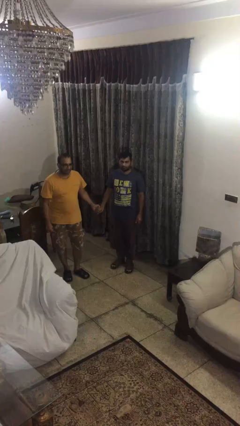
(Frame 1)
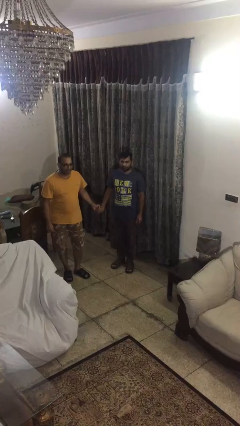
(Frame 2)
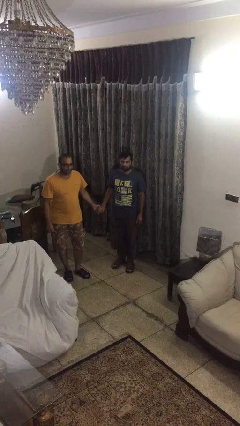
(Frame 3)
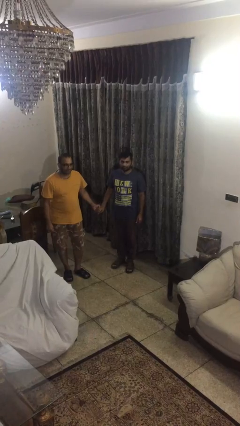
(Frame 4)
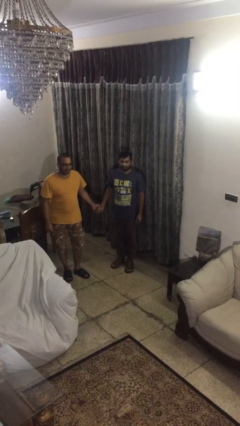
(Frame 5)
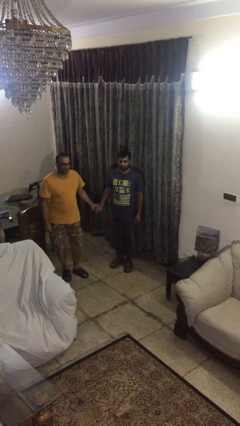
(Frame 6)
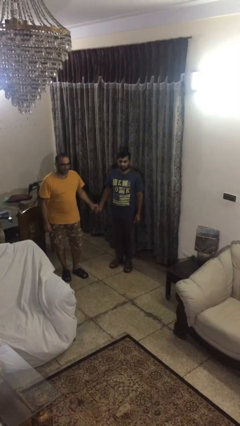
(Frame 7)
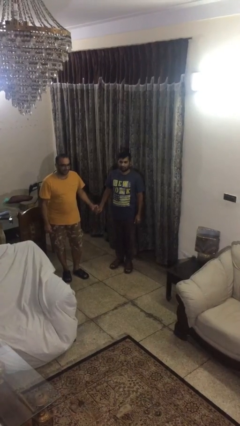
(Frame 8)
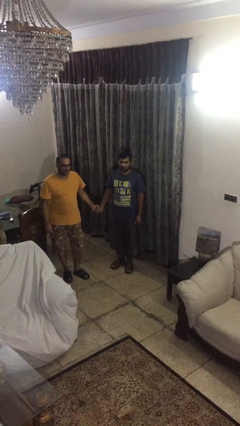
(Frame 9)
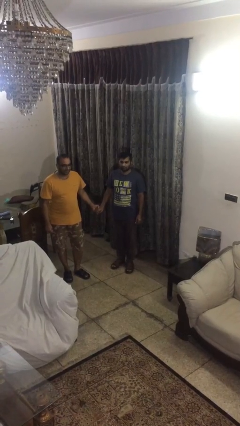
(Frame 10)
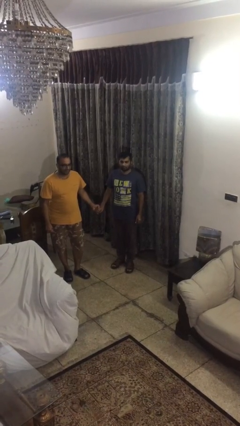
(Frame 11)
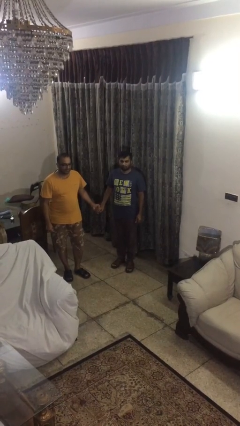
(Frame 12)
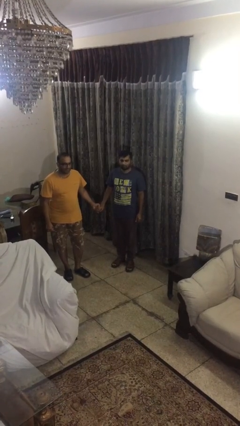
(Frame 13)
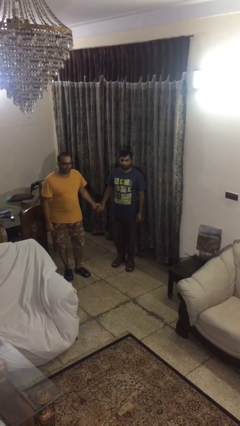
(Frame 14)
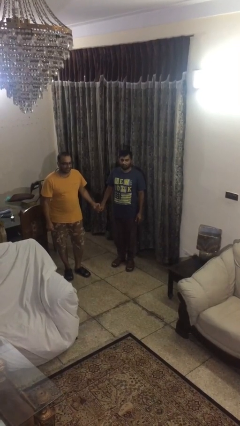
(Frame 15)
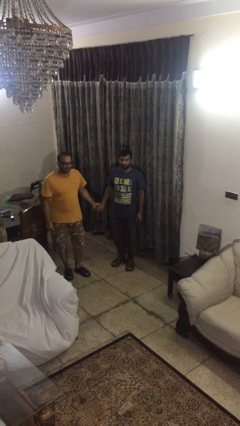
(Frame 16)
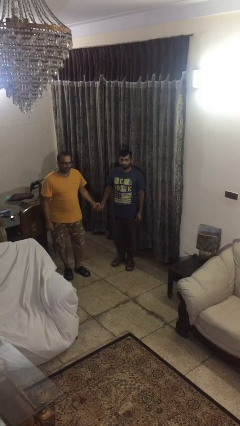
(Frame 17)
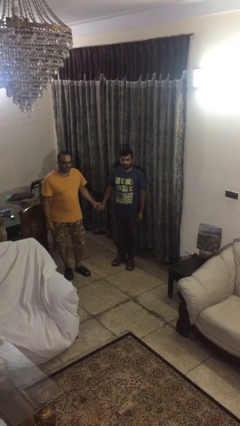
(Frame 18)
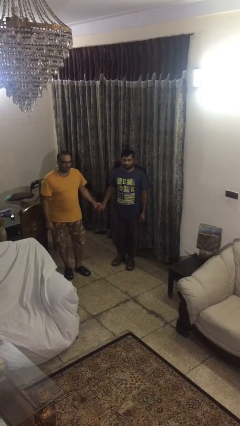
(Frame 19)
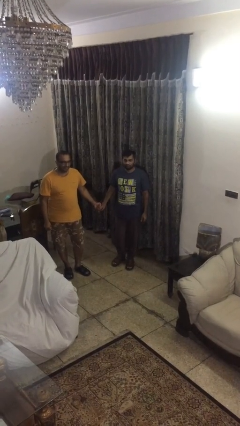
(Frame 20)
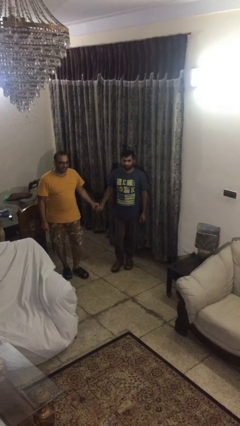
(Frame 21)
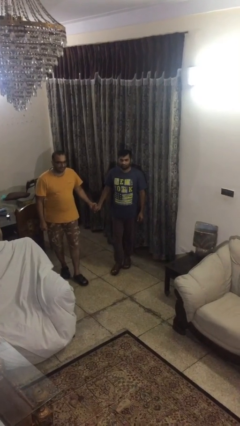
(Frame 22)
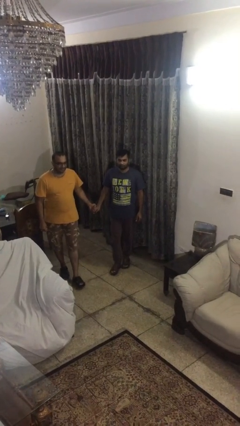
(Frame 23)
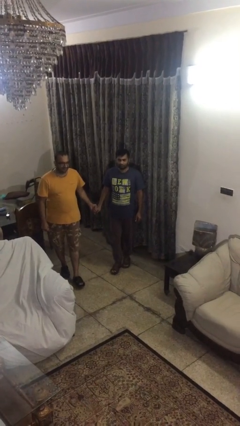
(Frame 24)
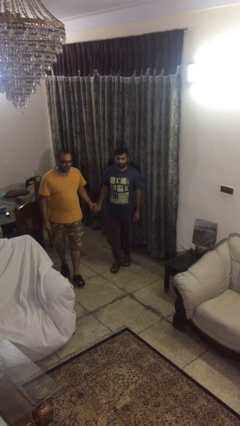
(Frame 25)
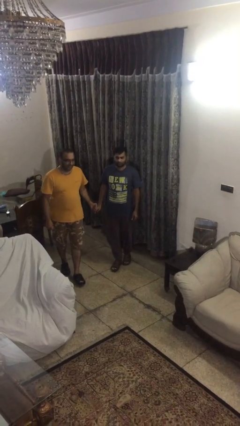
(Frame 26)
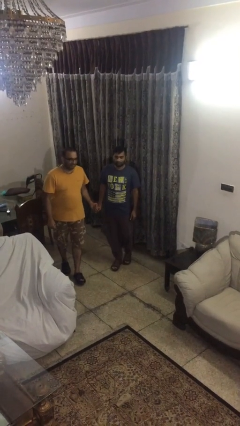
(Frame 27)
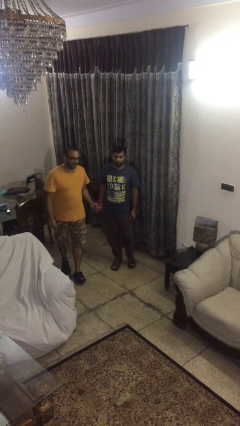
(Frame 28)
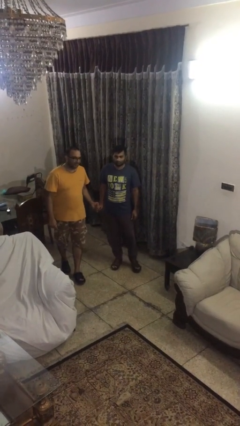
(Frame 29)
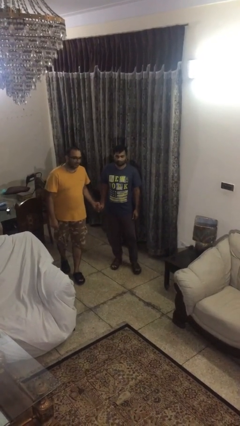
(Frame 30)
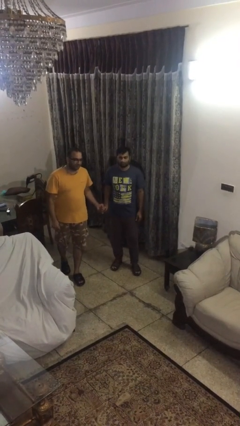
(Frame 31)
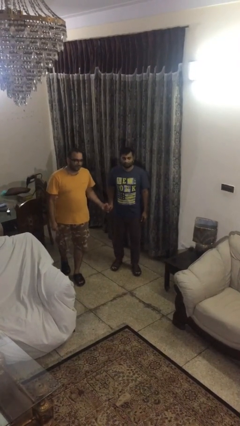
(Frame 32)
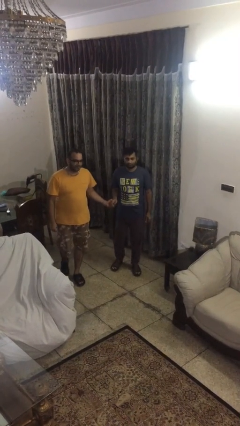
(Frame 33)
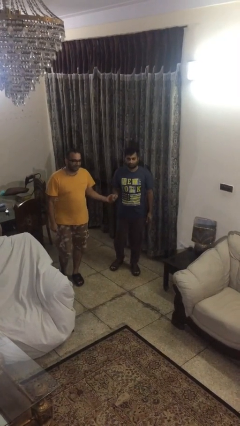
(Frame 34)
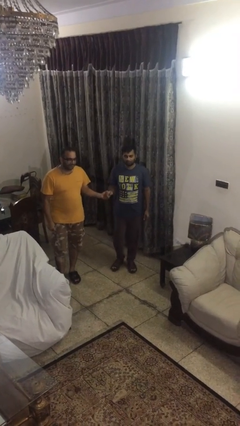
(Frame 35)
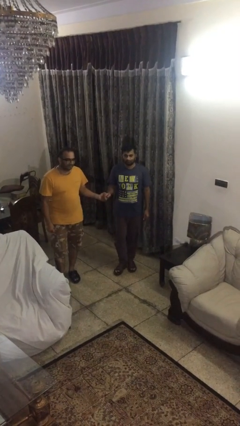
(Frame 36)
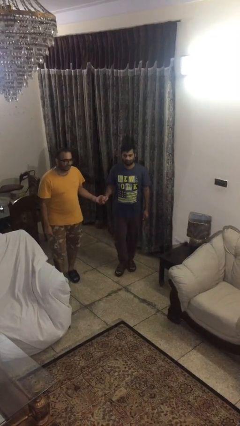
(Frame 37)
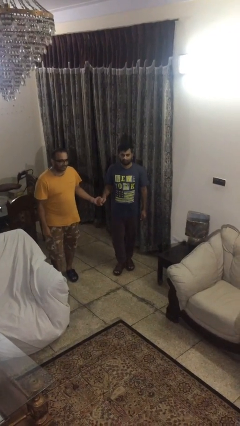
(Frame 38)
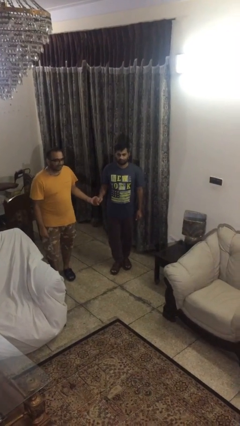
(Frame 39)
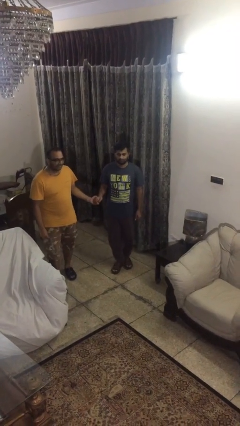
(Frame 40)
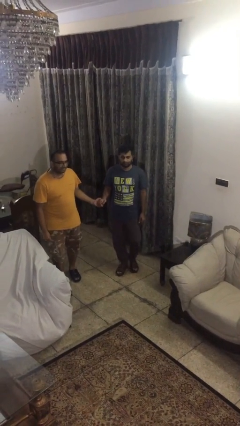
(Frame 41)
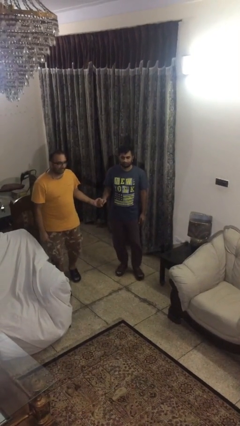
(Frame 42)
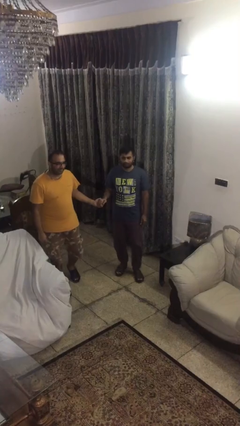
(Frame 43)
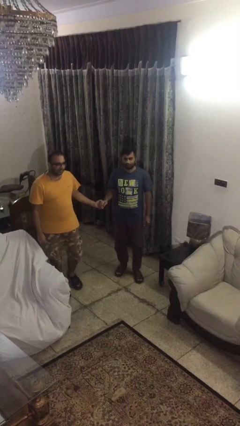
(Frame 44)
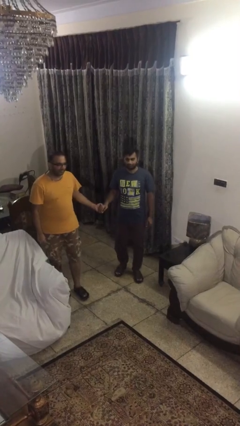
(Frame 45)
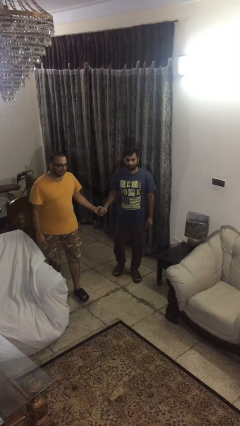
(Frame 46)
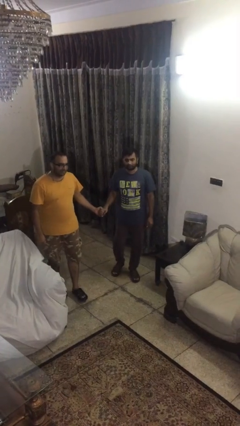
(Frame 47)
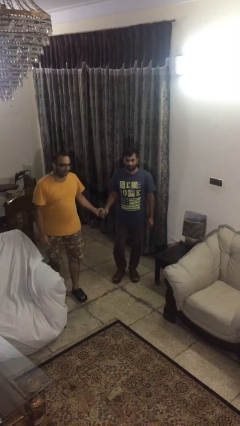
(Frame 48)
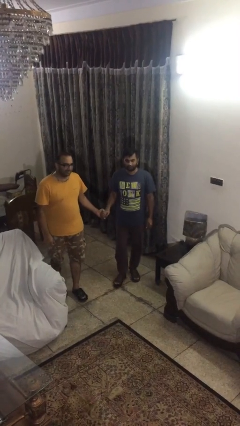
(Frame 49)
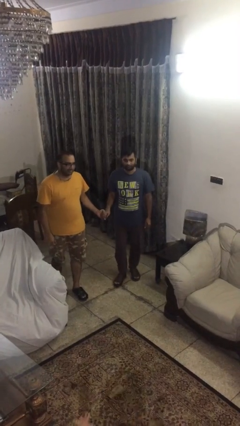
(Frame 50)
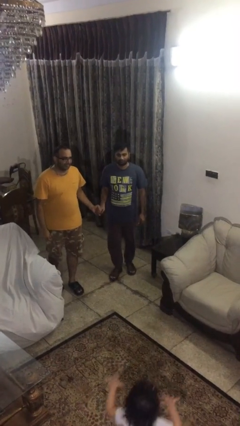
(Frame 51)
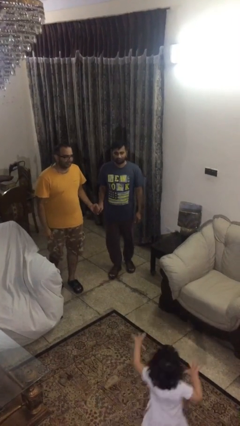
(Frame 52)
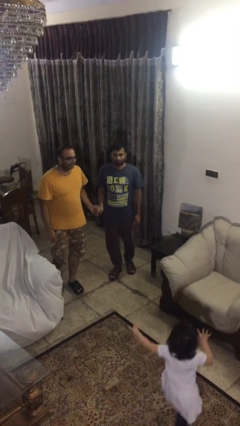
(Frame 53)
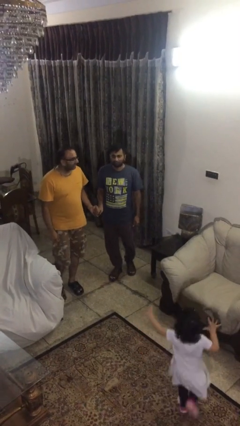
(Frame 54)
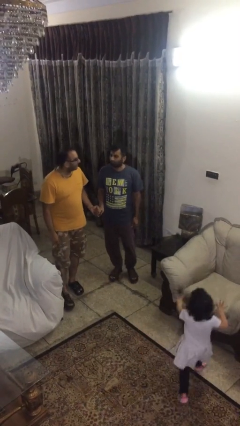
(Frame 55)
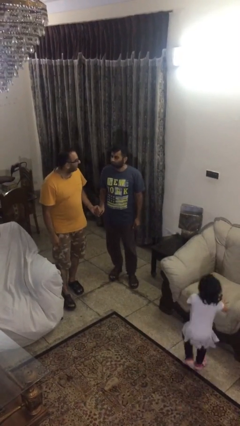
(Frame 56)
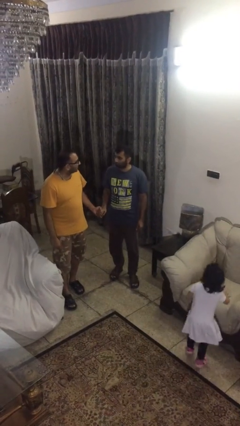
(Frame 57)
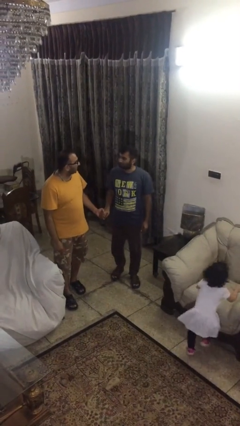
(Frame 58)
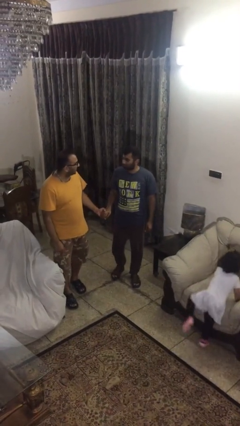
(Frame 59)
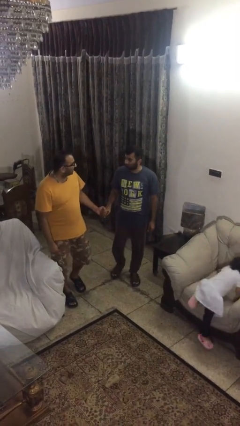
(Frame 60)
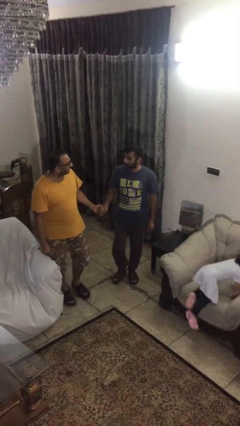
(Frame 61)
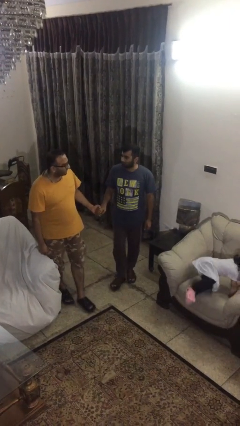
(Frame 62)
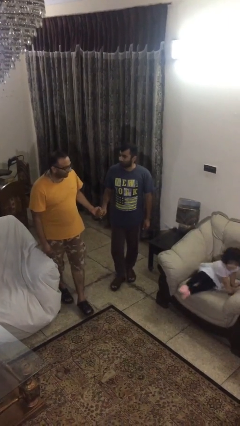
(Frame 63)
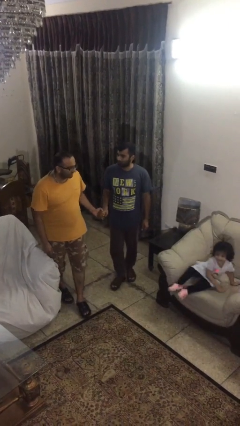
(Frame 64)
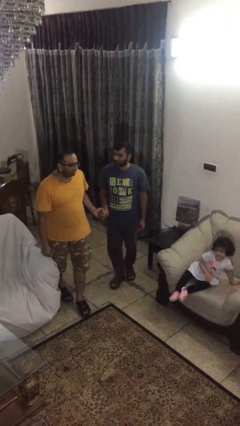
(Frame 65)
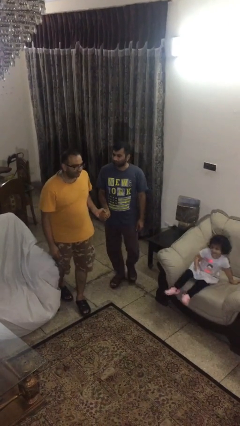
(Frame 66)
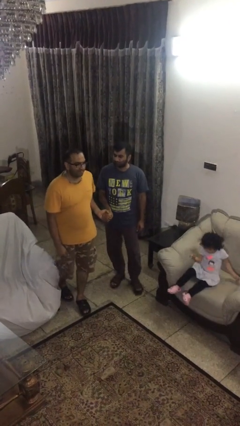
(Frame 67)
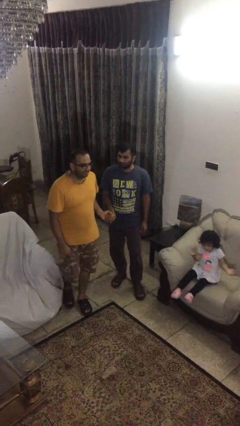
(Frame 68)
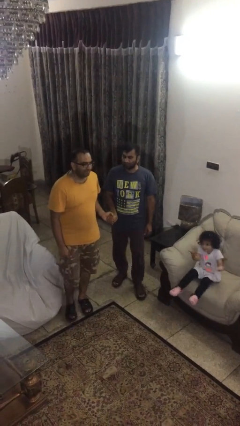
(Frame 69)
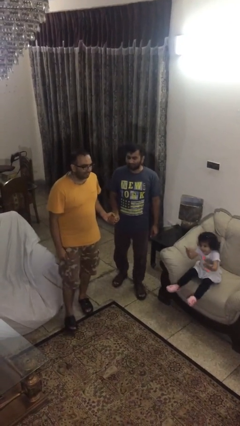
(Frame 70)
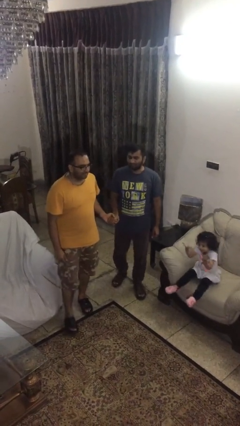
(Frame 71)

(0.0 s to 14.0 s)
person holds hand
